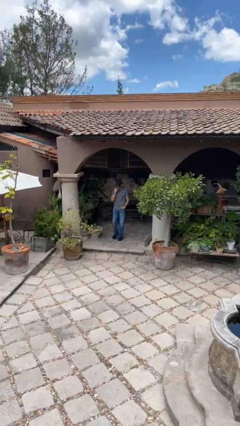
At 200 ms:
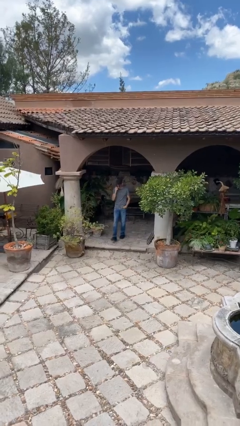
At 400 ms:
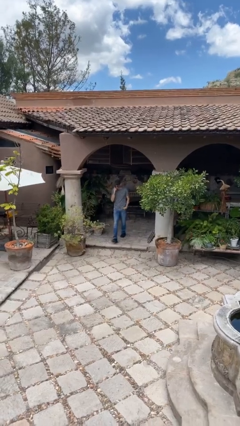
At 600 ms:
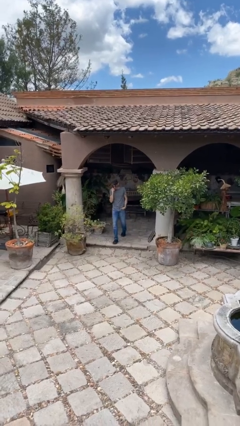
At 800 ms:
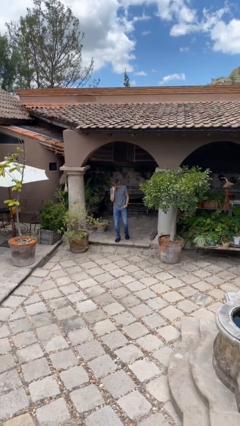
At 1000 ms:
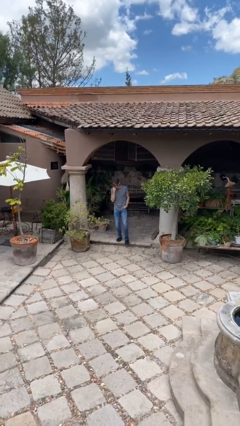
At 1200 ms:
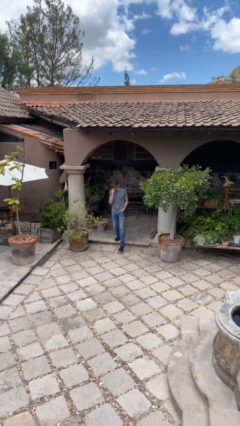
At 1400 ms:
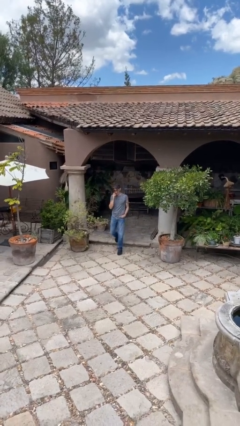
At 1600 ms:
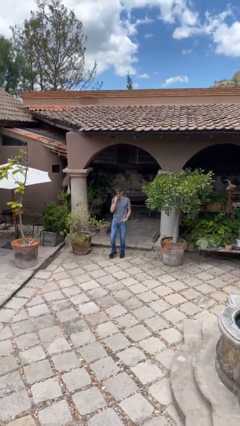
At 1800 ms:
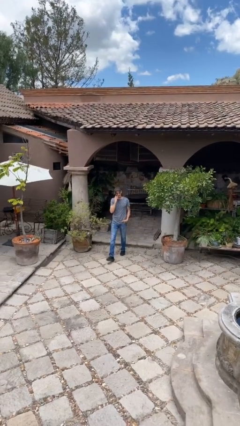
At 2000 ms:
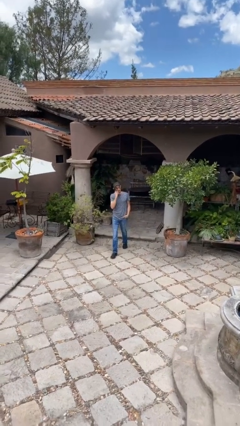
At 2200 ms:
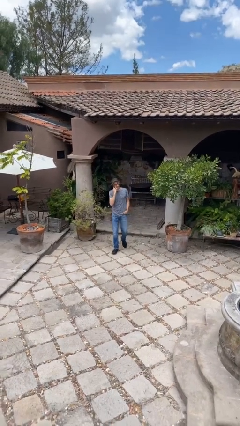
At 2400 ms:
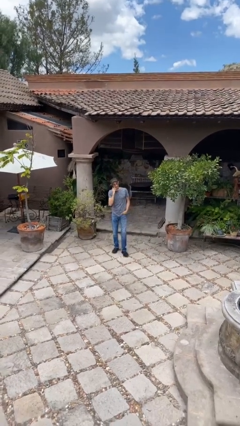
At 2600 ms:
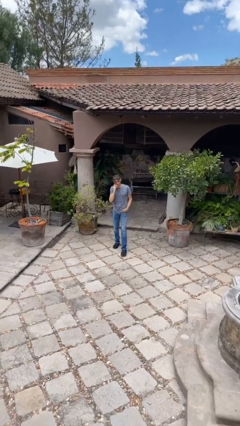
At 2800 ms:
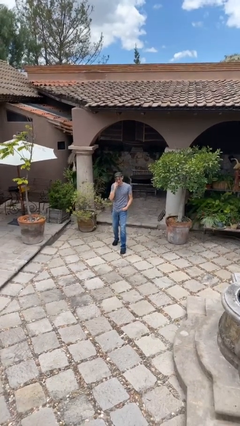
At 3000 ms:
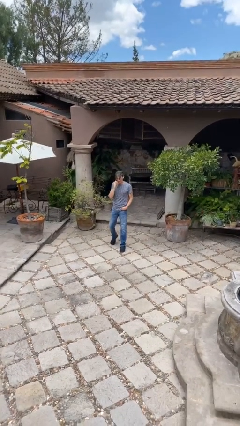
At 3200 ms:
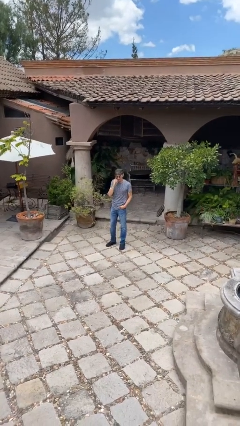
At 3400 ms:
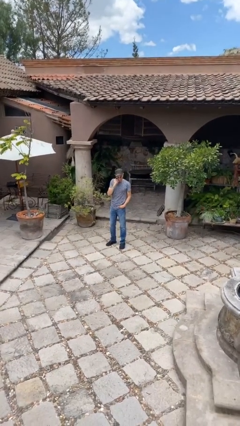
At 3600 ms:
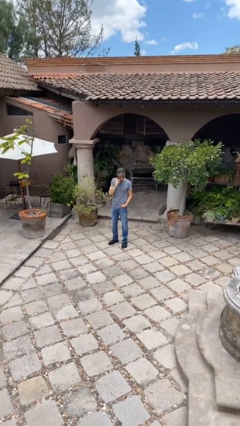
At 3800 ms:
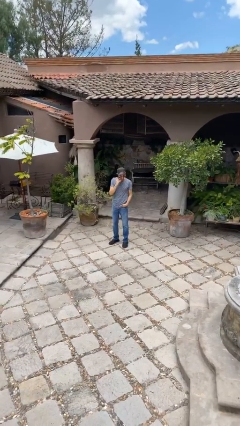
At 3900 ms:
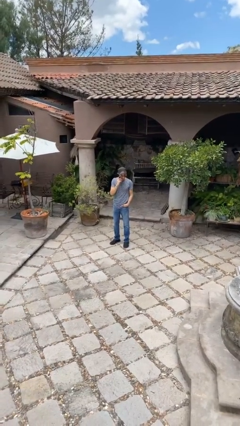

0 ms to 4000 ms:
person enters scene through structure

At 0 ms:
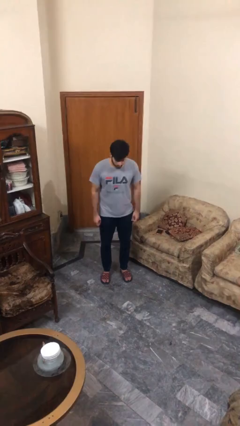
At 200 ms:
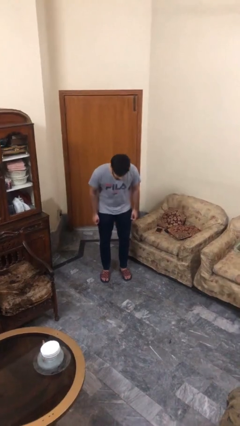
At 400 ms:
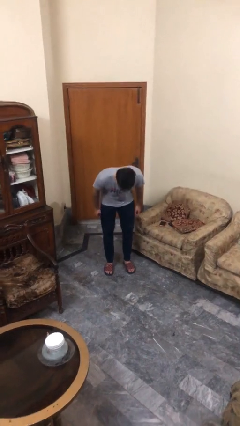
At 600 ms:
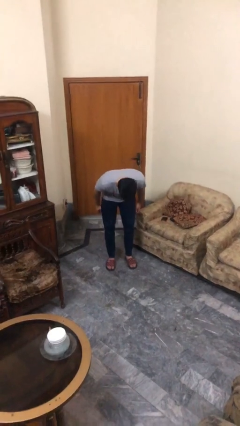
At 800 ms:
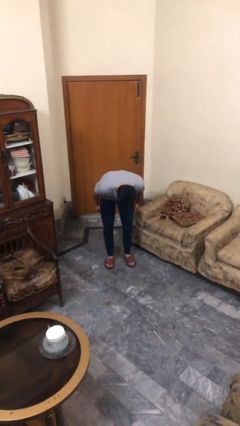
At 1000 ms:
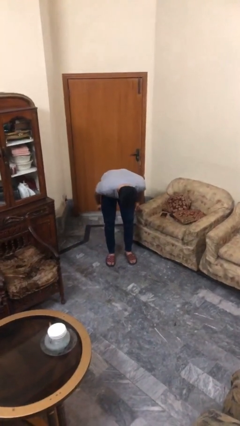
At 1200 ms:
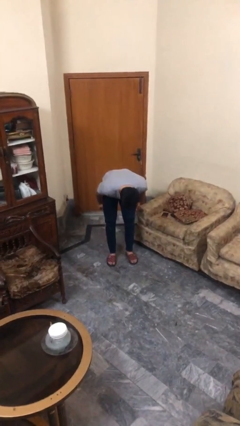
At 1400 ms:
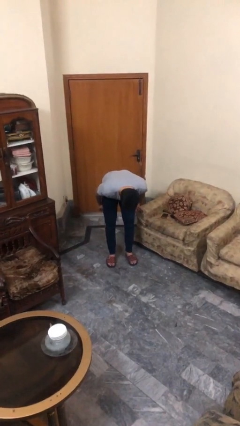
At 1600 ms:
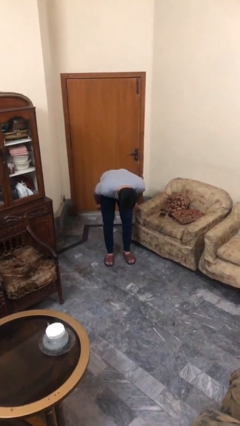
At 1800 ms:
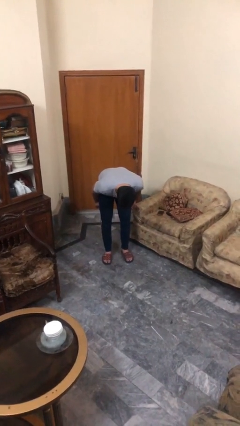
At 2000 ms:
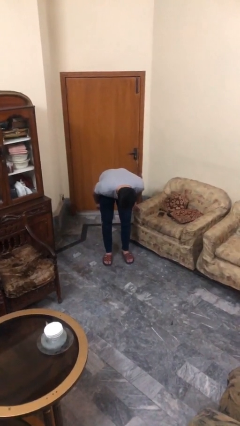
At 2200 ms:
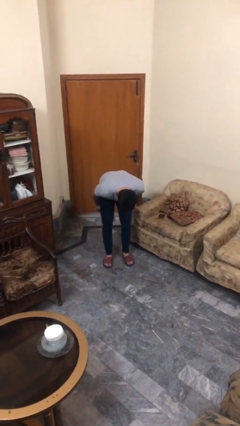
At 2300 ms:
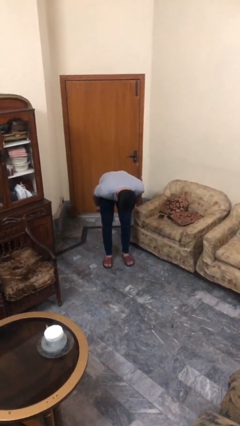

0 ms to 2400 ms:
person bows

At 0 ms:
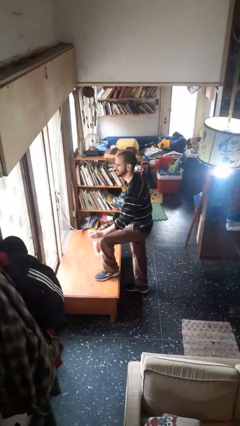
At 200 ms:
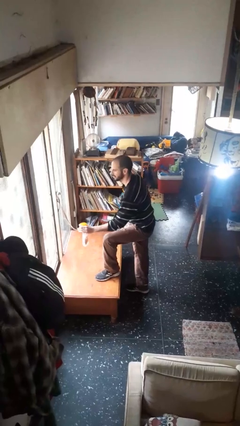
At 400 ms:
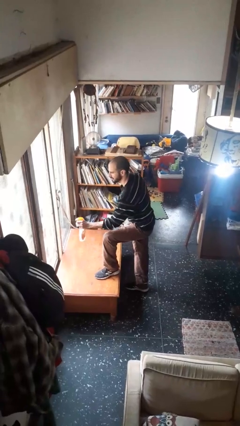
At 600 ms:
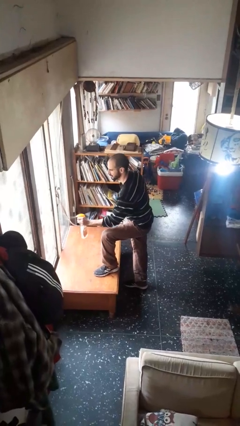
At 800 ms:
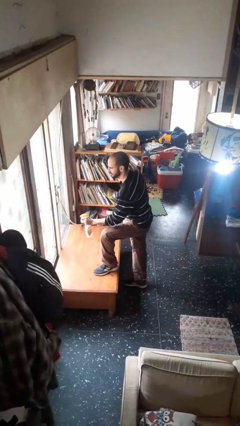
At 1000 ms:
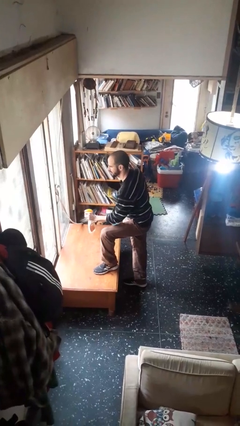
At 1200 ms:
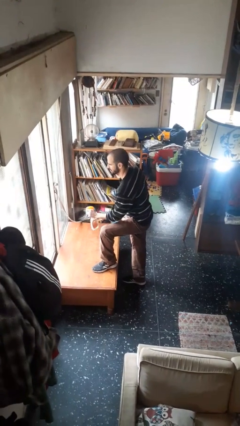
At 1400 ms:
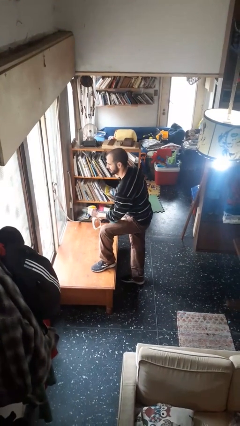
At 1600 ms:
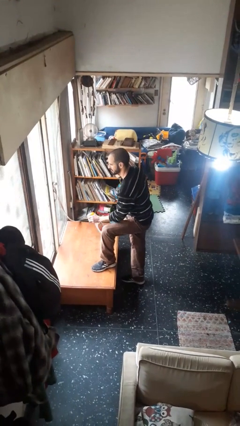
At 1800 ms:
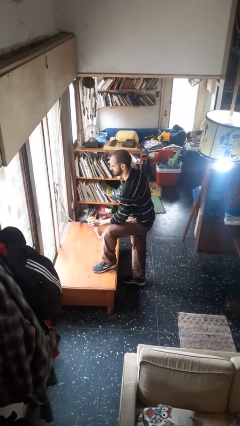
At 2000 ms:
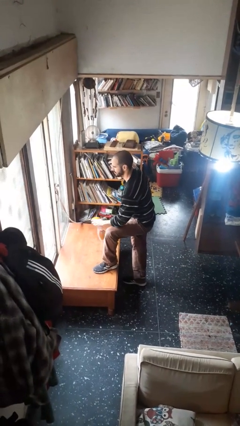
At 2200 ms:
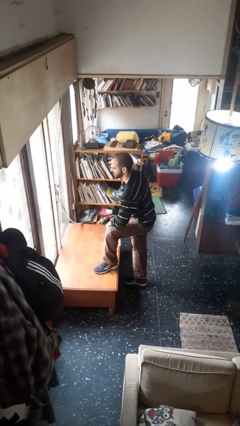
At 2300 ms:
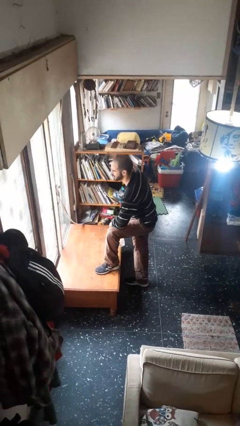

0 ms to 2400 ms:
person sprays from bottle

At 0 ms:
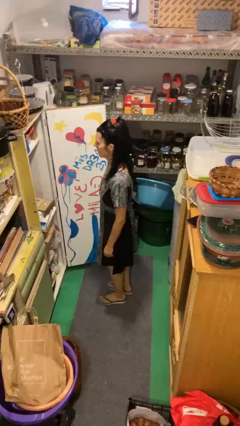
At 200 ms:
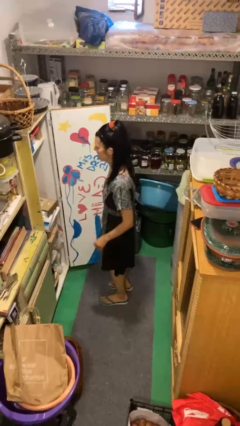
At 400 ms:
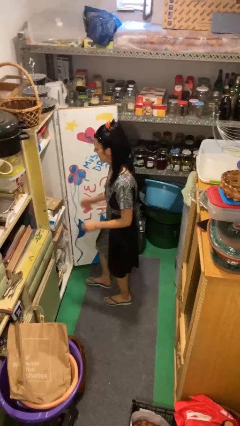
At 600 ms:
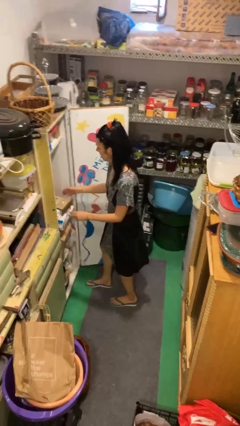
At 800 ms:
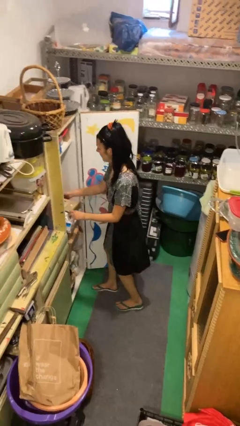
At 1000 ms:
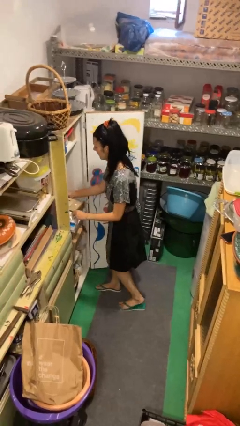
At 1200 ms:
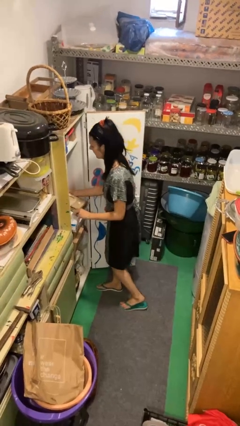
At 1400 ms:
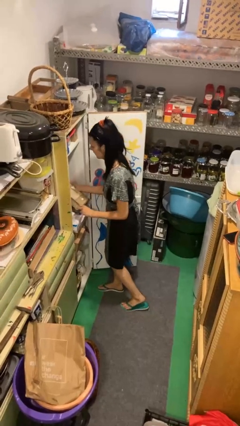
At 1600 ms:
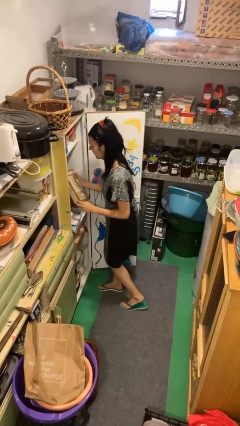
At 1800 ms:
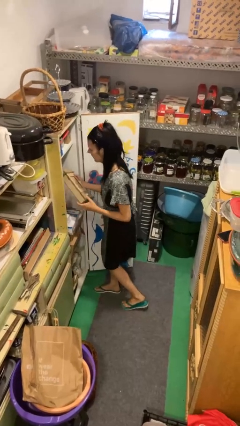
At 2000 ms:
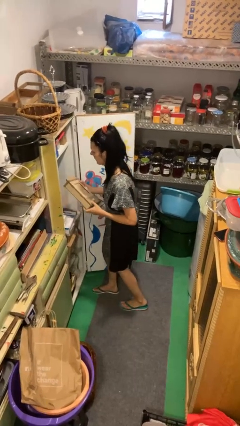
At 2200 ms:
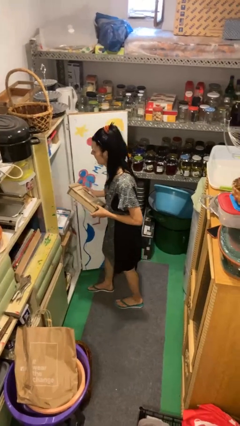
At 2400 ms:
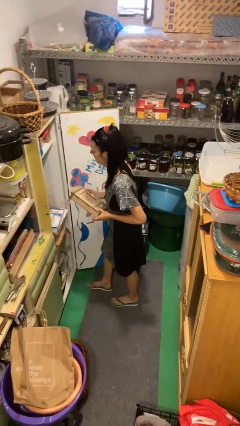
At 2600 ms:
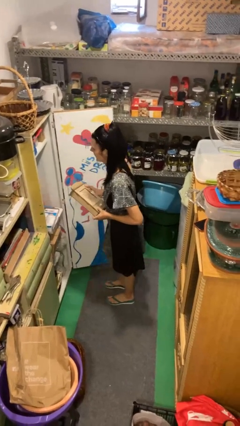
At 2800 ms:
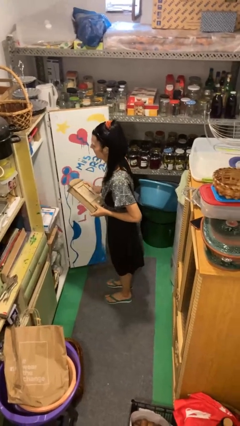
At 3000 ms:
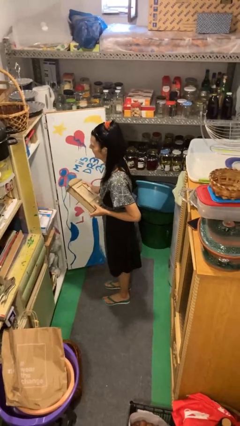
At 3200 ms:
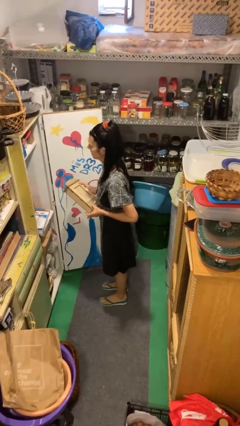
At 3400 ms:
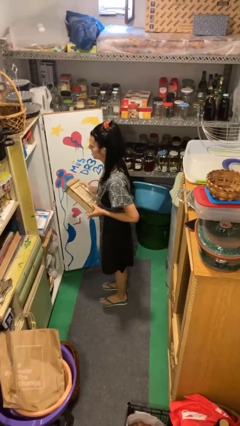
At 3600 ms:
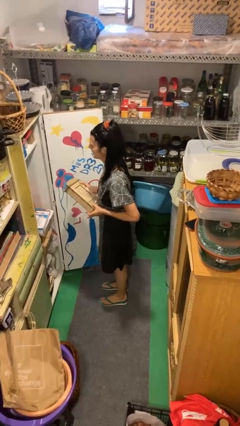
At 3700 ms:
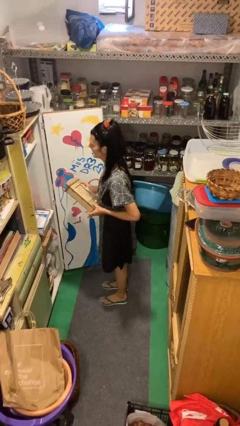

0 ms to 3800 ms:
person picks up object from cabinet

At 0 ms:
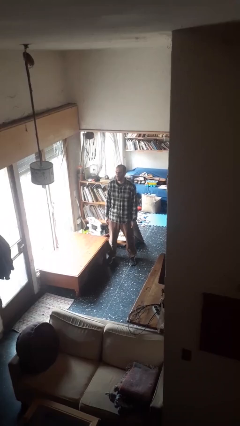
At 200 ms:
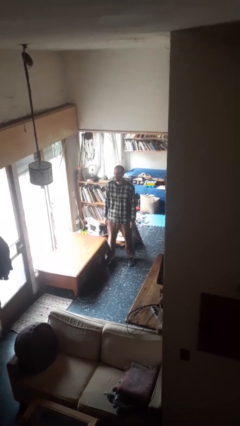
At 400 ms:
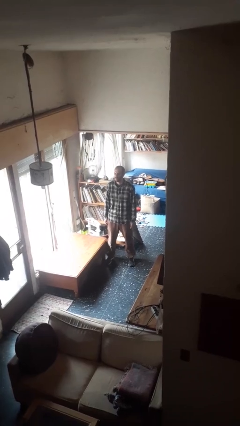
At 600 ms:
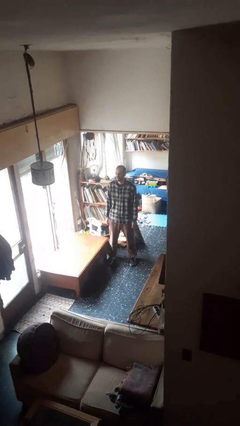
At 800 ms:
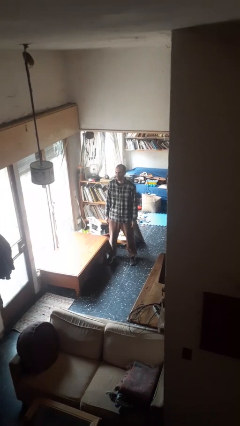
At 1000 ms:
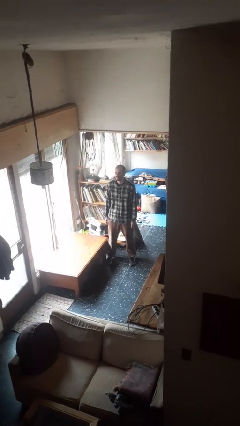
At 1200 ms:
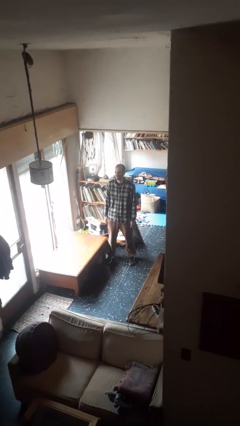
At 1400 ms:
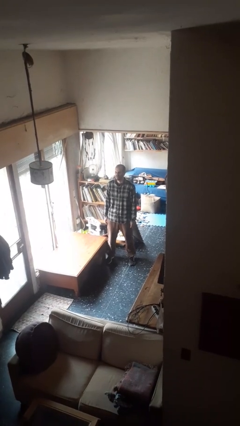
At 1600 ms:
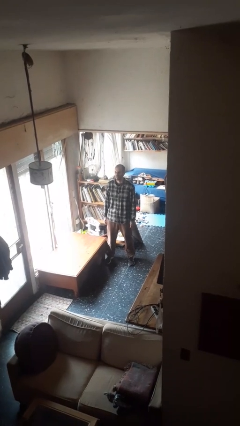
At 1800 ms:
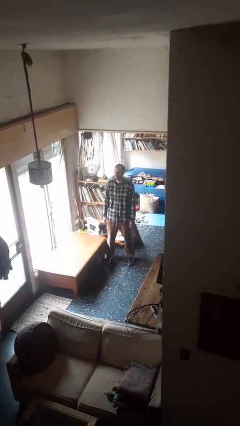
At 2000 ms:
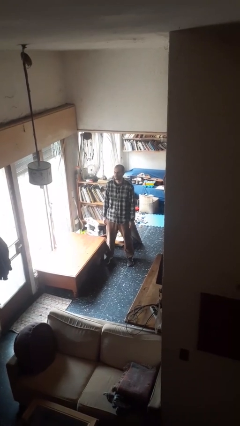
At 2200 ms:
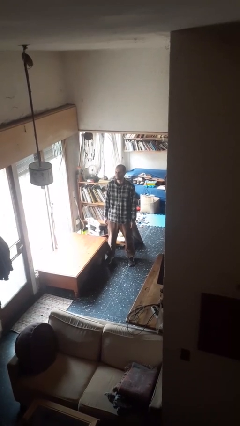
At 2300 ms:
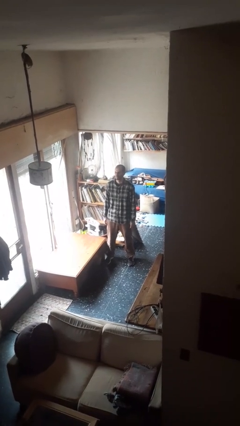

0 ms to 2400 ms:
person sticks out tongue

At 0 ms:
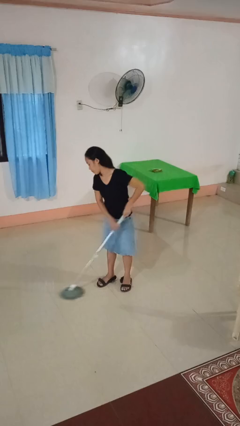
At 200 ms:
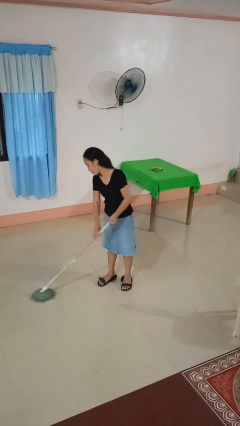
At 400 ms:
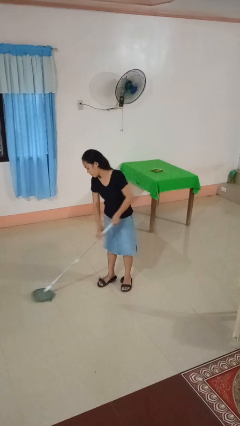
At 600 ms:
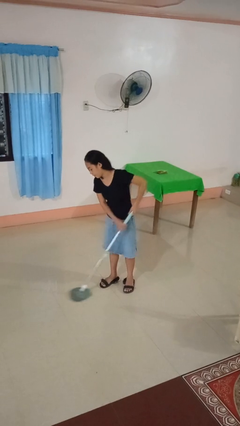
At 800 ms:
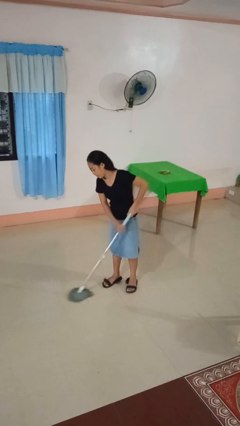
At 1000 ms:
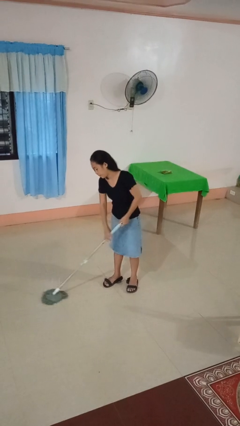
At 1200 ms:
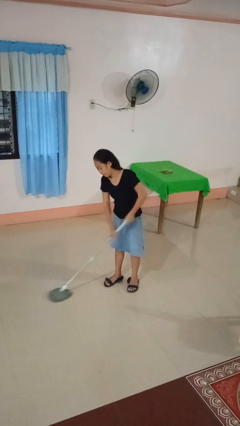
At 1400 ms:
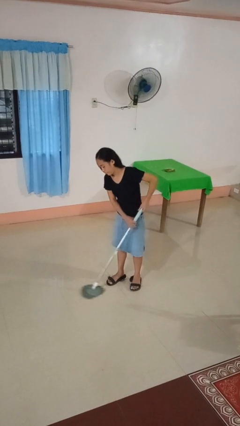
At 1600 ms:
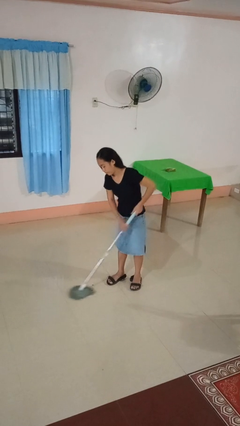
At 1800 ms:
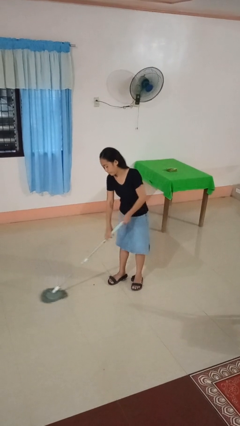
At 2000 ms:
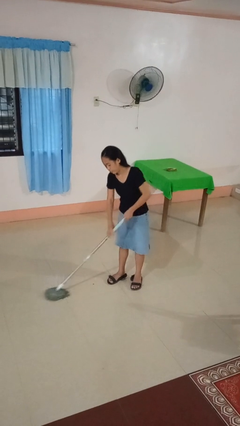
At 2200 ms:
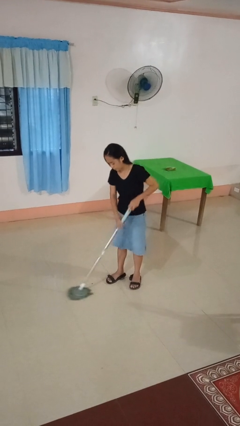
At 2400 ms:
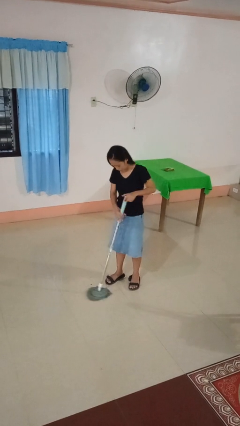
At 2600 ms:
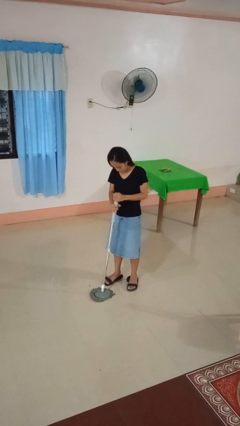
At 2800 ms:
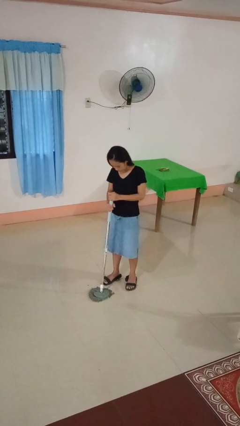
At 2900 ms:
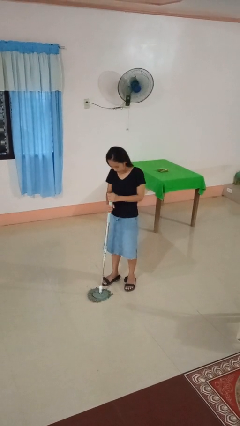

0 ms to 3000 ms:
person mops
